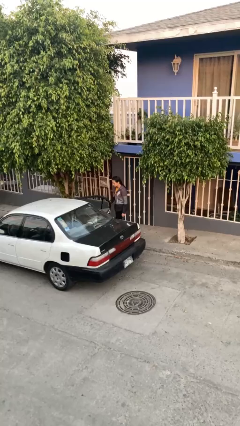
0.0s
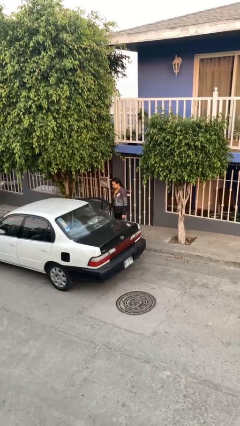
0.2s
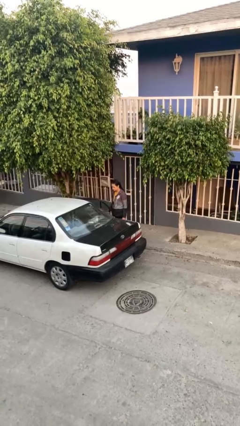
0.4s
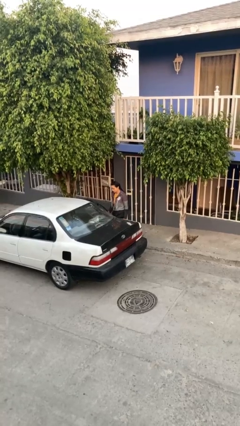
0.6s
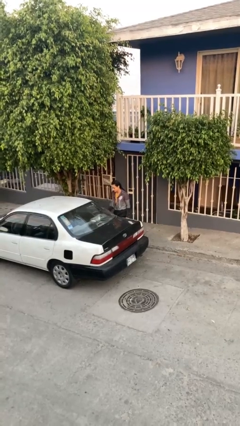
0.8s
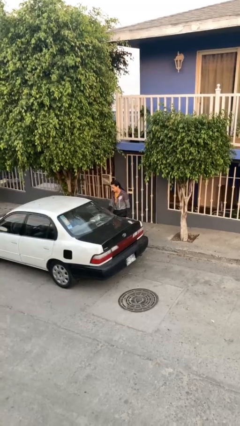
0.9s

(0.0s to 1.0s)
person closes car door

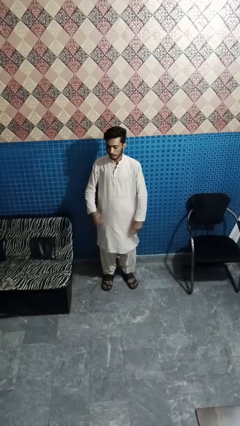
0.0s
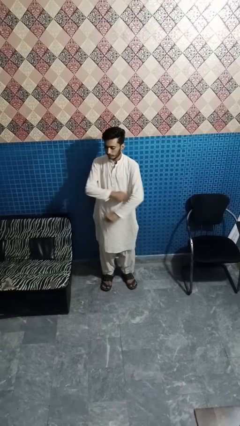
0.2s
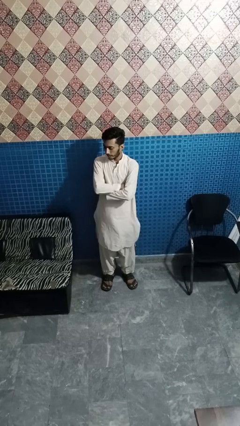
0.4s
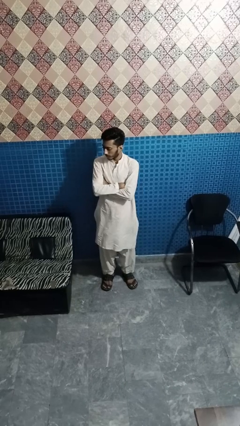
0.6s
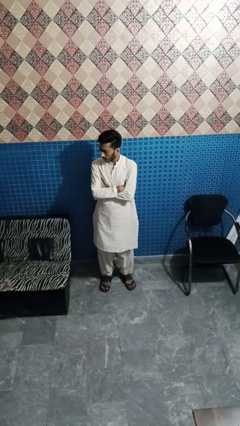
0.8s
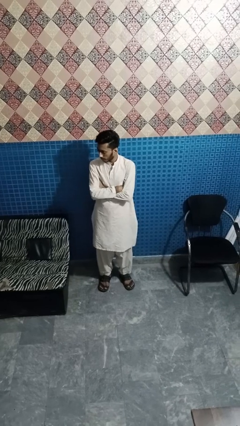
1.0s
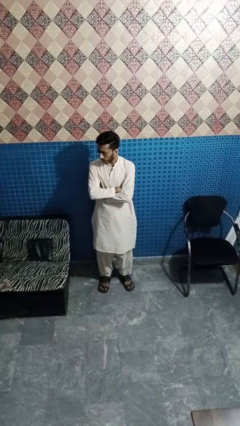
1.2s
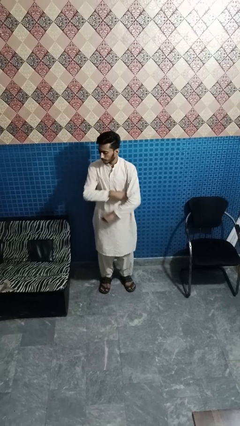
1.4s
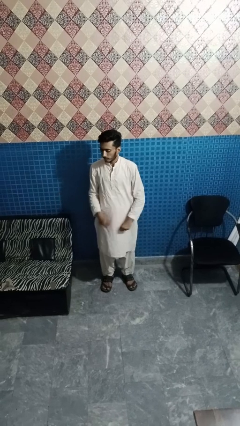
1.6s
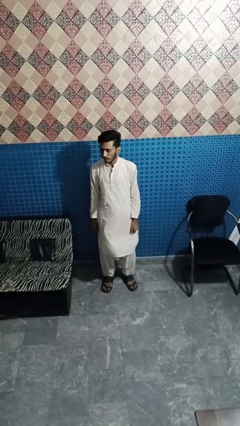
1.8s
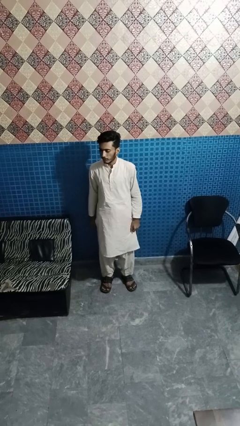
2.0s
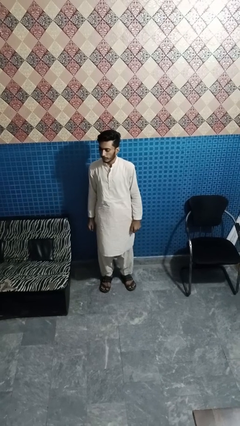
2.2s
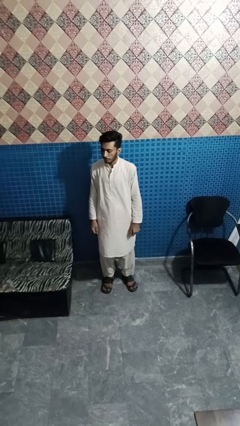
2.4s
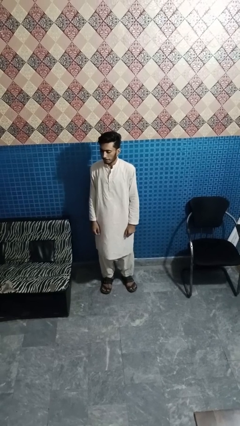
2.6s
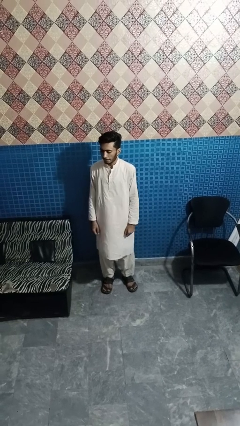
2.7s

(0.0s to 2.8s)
person crosses arms

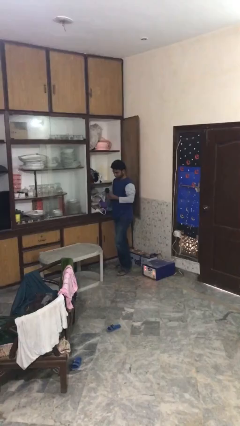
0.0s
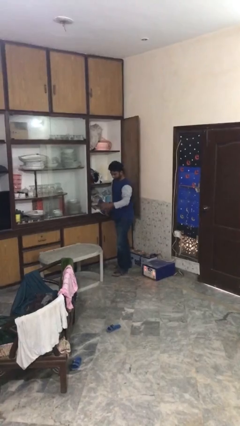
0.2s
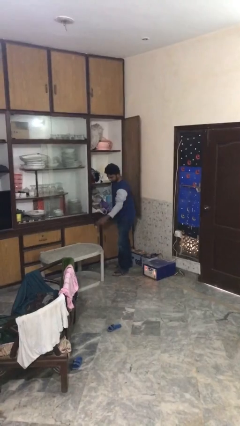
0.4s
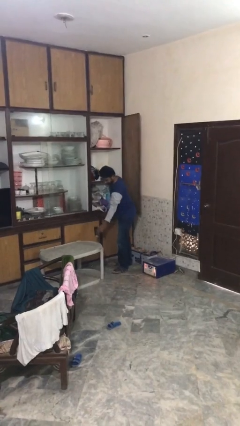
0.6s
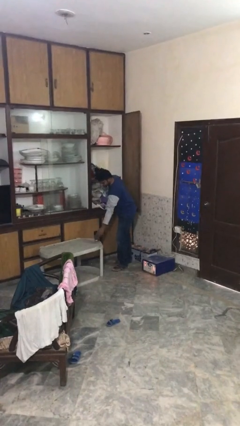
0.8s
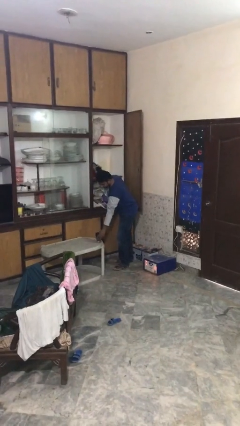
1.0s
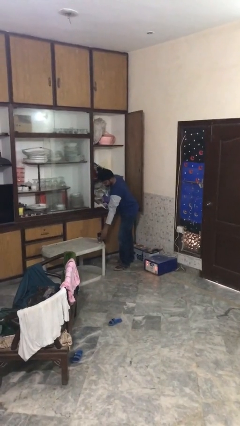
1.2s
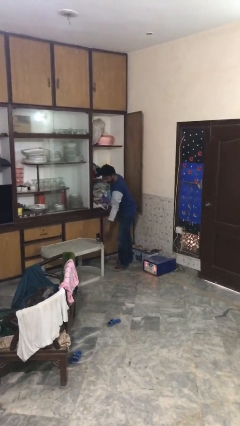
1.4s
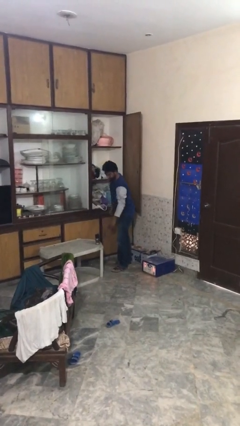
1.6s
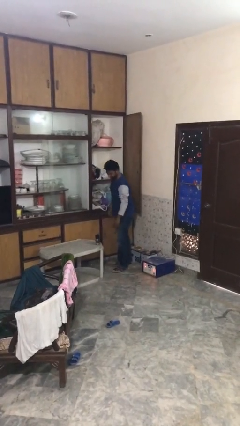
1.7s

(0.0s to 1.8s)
person puts down object on table

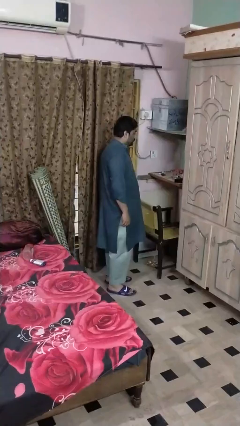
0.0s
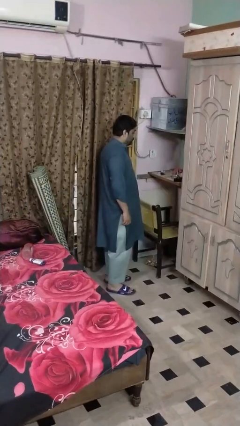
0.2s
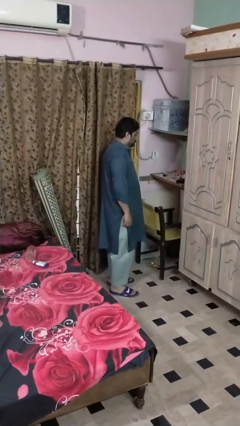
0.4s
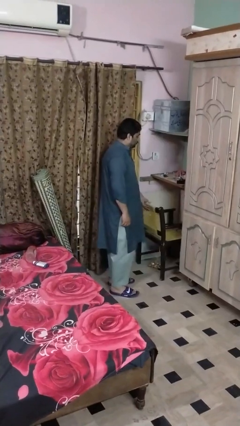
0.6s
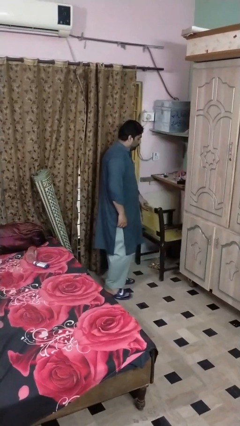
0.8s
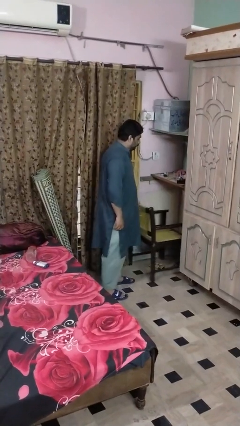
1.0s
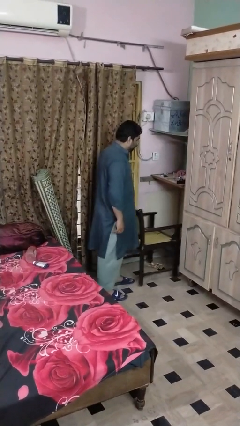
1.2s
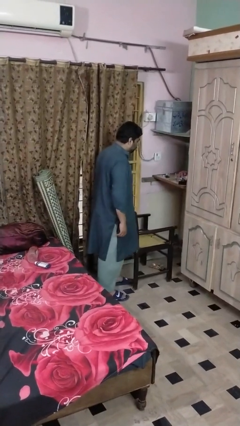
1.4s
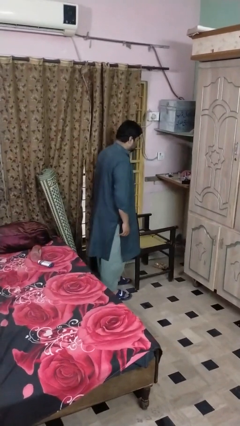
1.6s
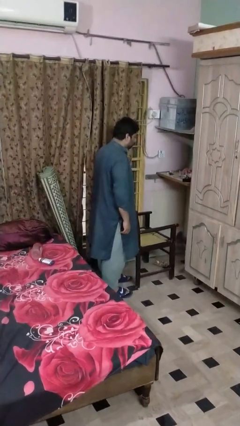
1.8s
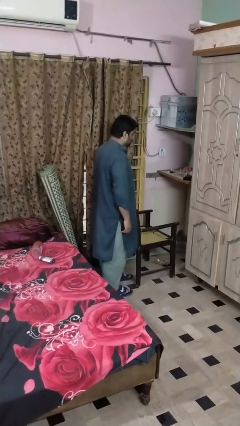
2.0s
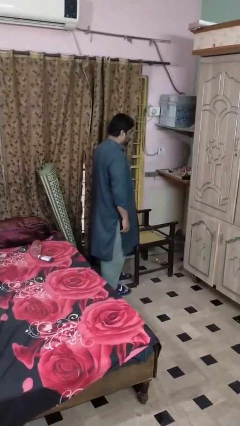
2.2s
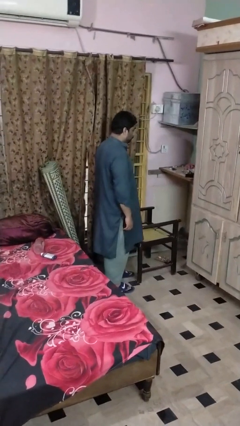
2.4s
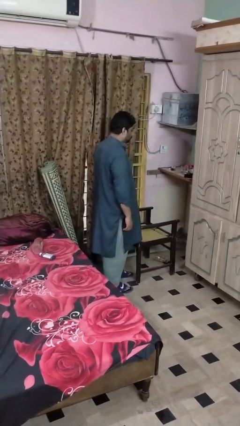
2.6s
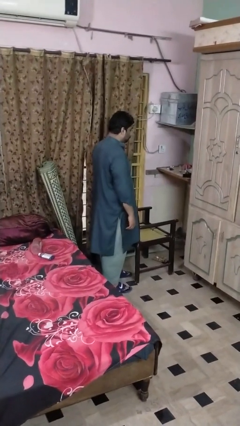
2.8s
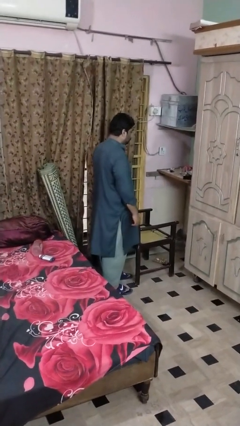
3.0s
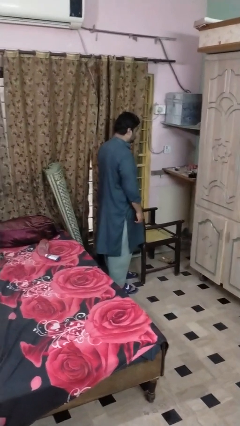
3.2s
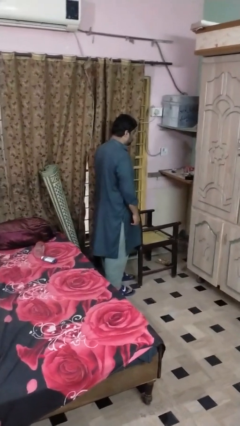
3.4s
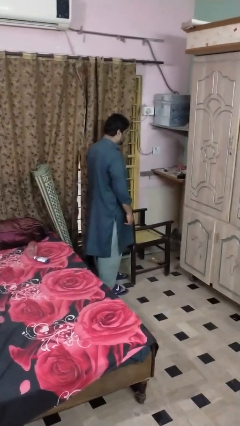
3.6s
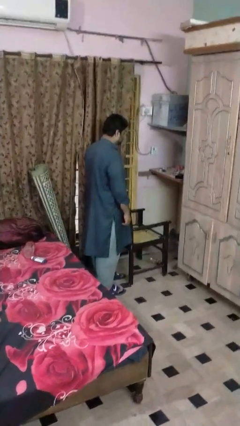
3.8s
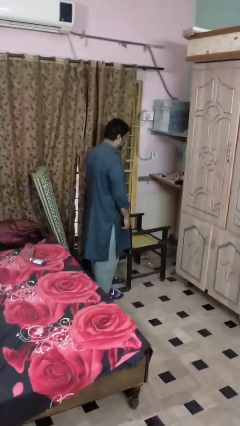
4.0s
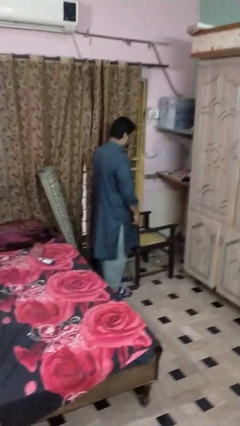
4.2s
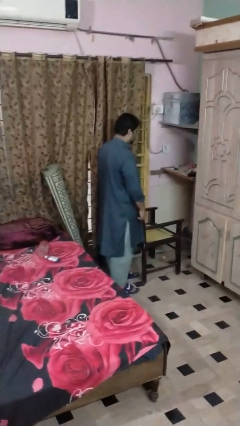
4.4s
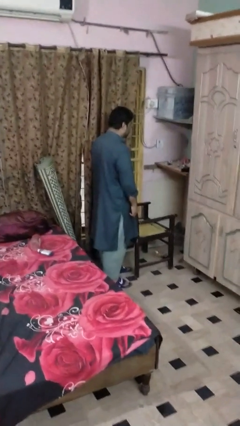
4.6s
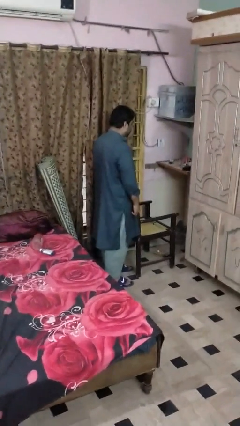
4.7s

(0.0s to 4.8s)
person pulls out chair

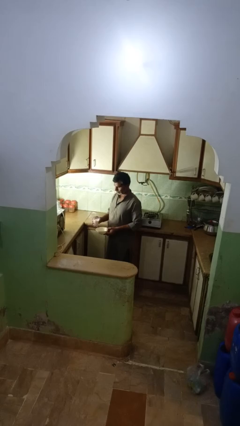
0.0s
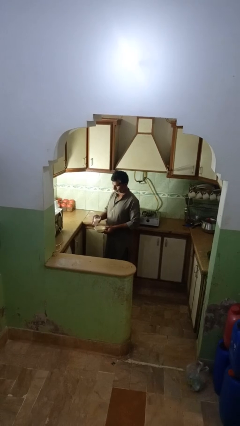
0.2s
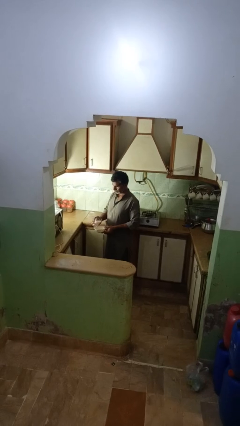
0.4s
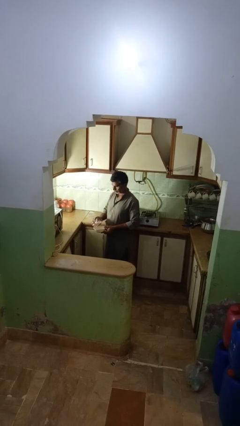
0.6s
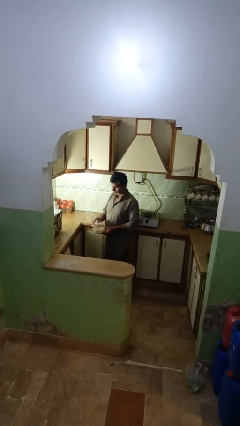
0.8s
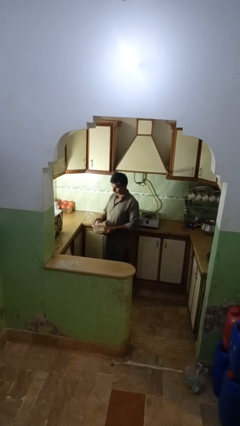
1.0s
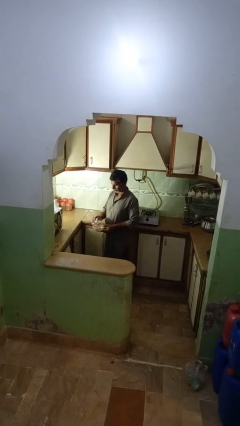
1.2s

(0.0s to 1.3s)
person pours into bowl

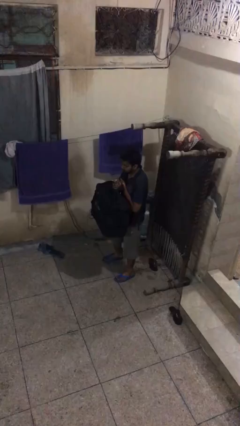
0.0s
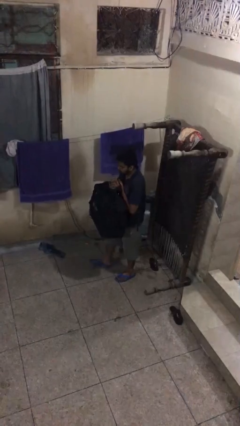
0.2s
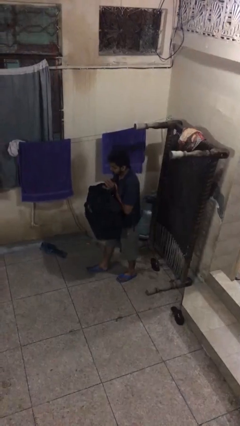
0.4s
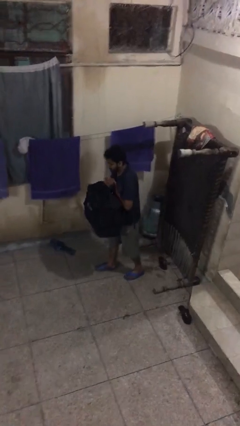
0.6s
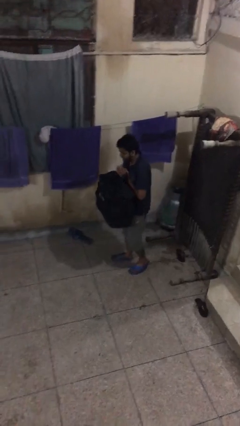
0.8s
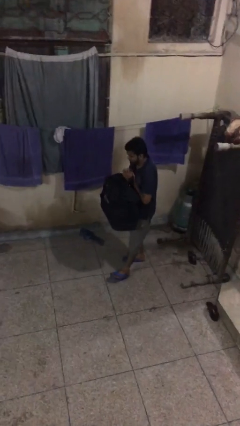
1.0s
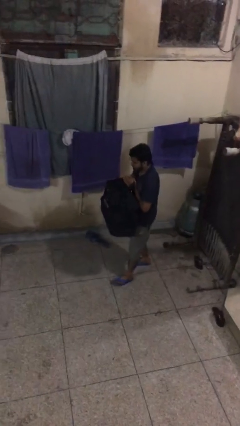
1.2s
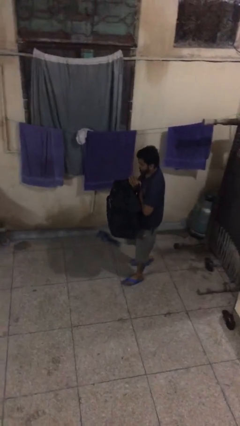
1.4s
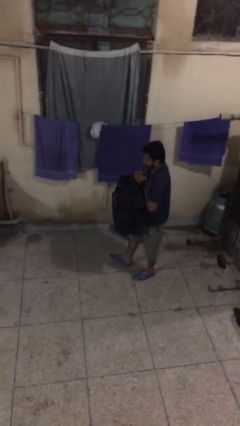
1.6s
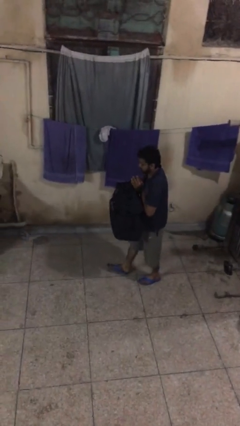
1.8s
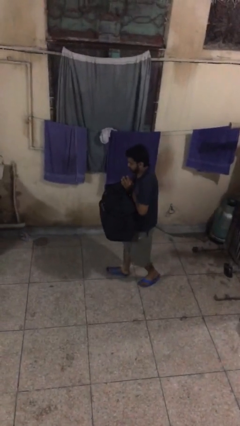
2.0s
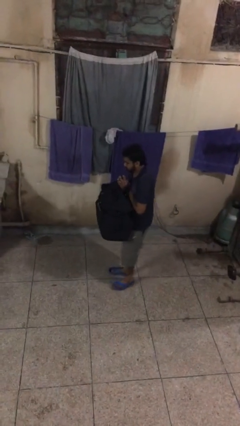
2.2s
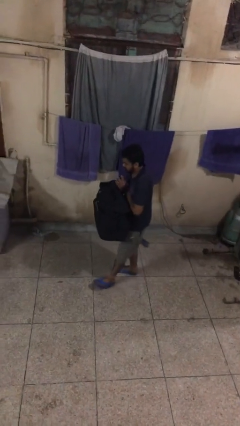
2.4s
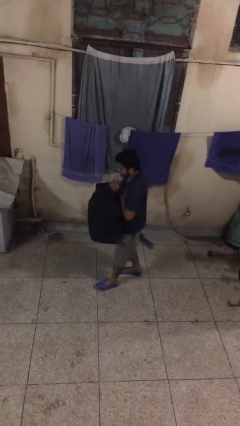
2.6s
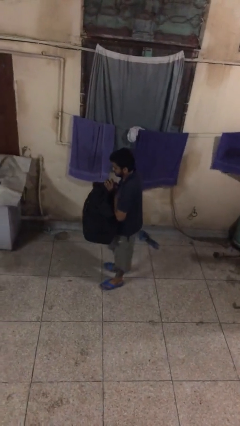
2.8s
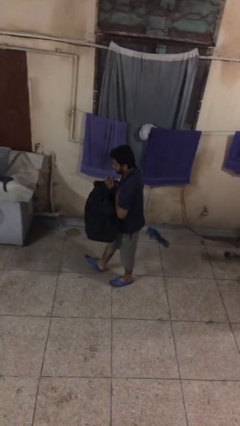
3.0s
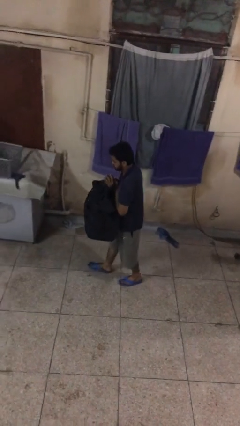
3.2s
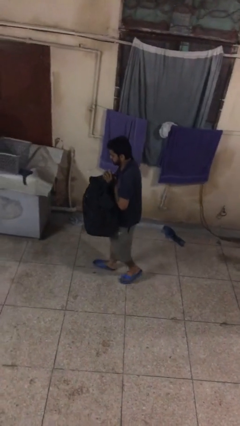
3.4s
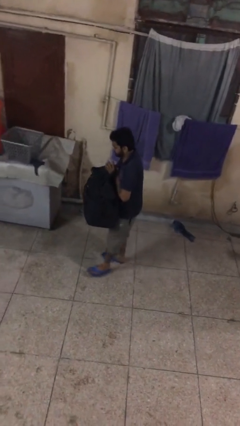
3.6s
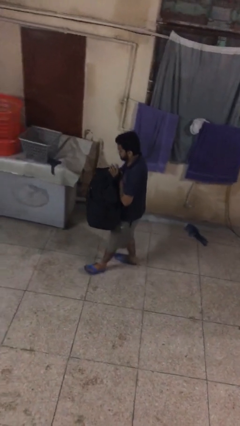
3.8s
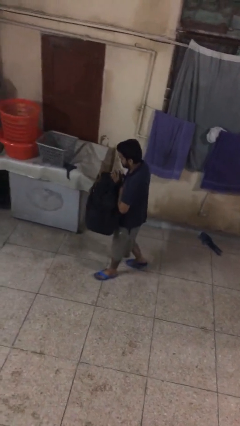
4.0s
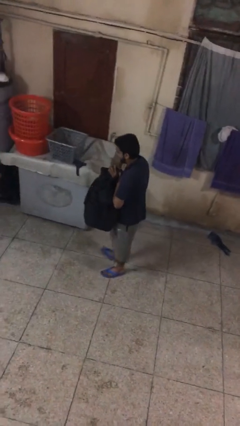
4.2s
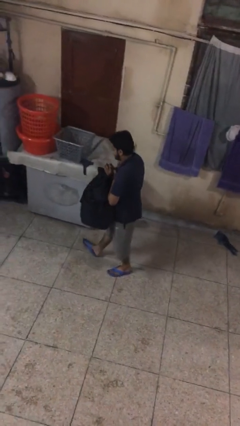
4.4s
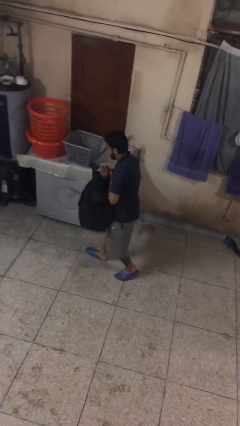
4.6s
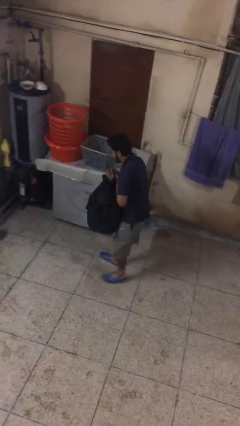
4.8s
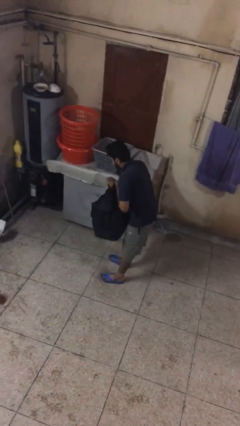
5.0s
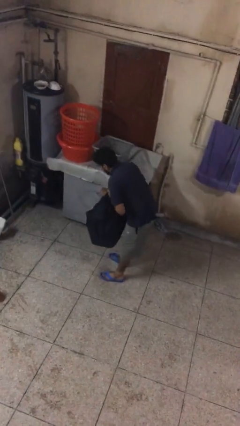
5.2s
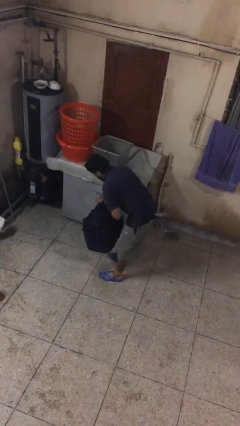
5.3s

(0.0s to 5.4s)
person carries heavy object
